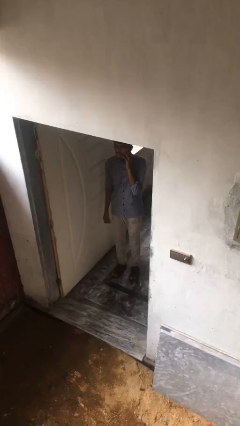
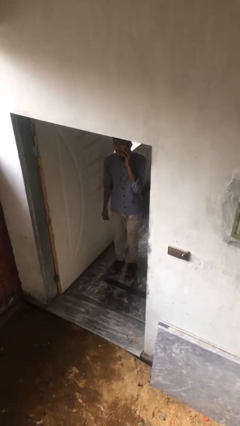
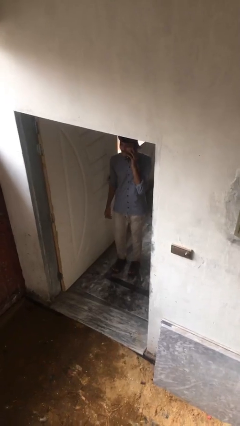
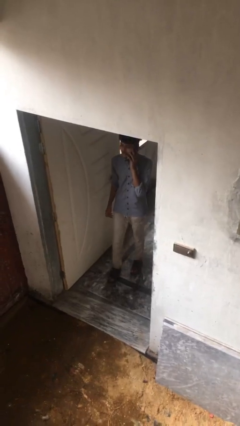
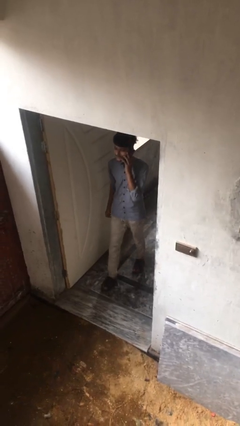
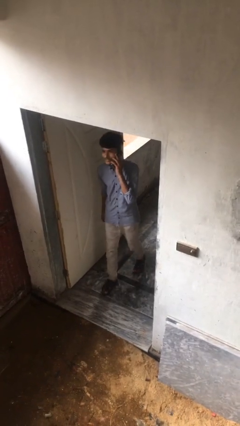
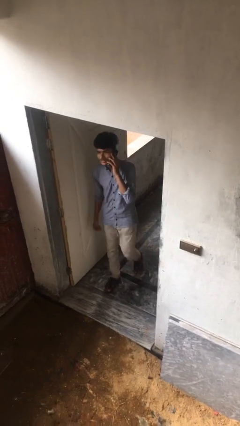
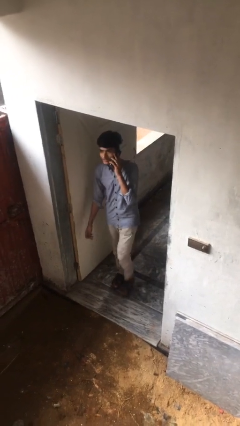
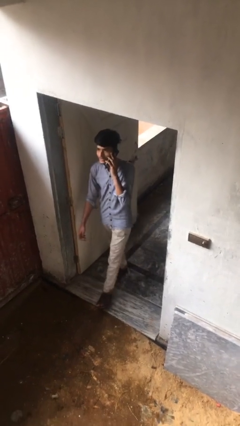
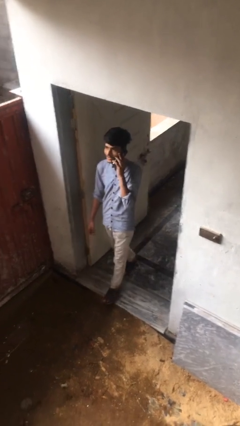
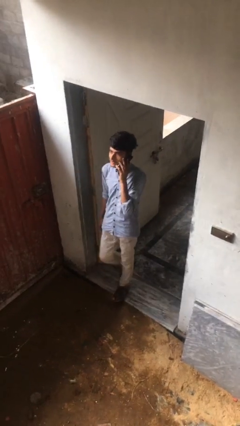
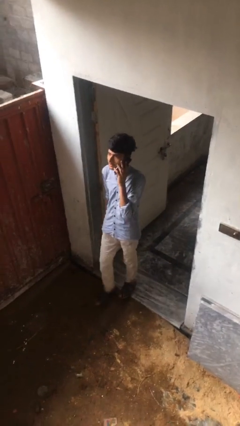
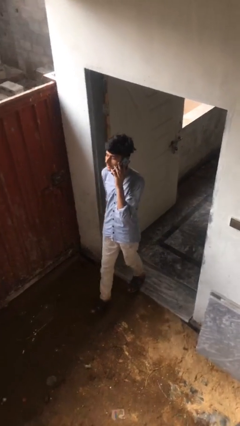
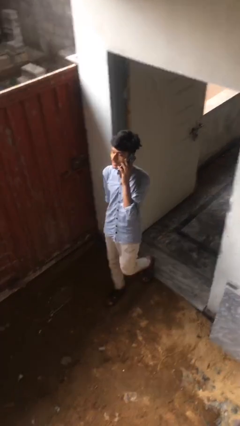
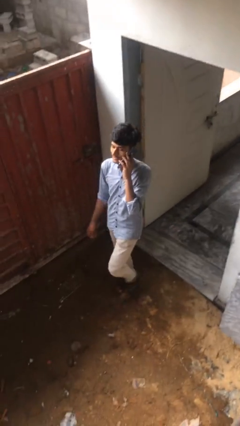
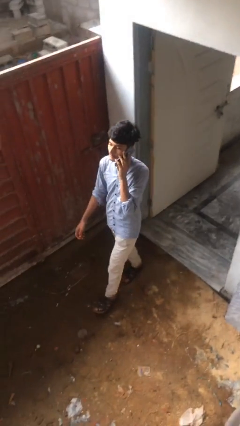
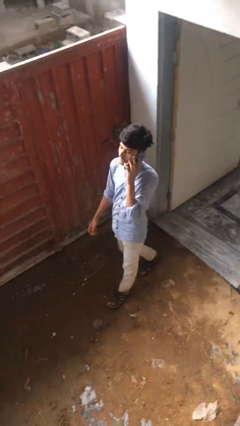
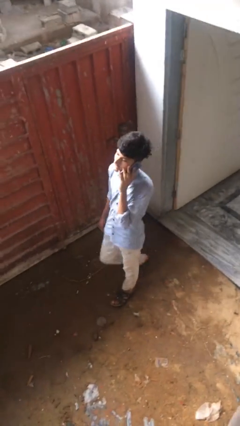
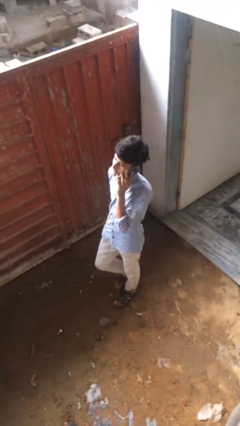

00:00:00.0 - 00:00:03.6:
person enters scene through structure

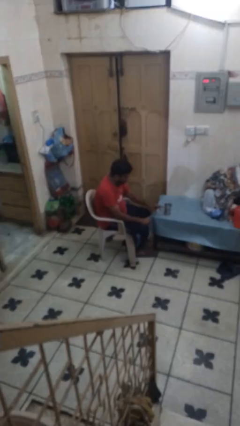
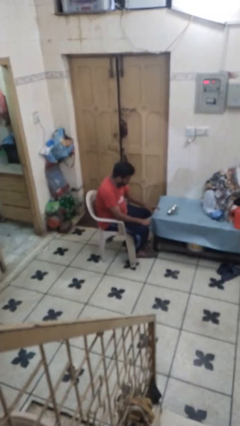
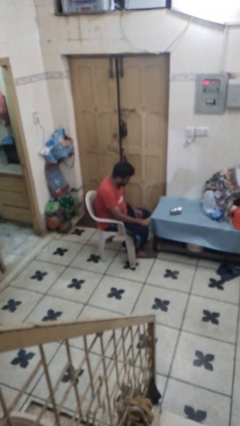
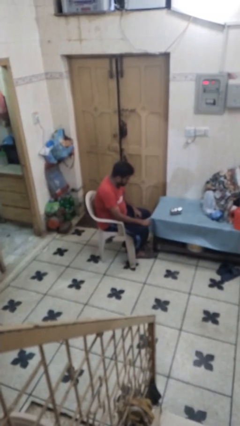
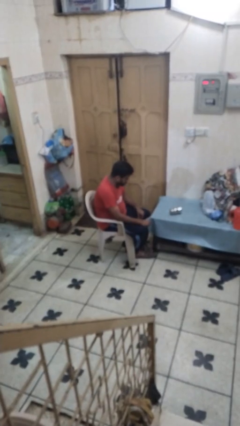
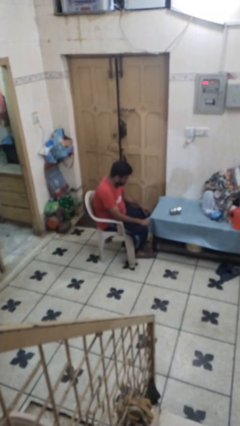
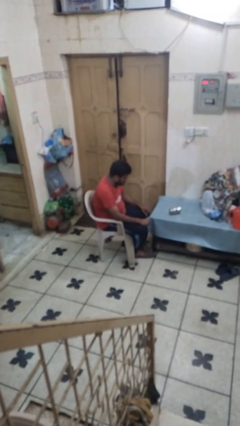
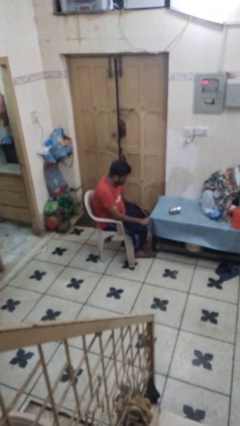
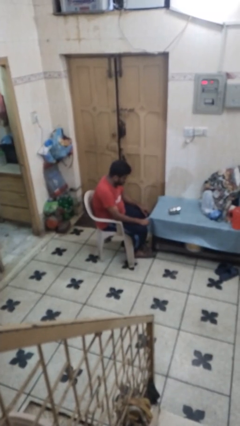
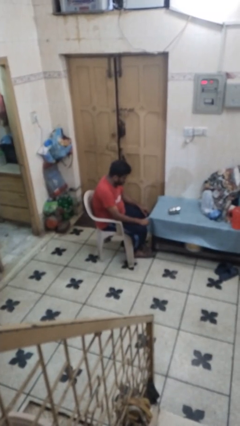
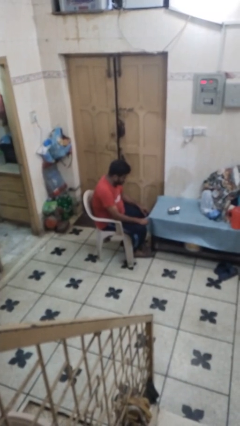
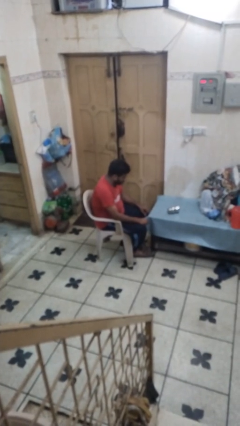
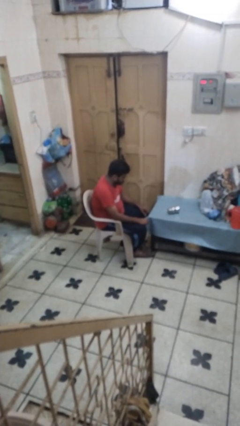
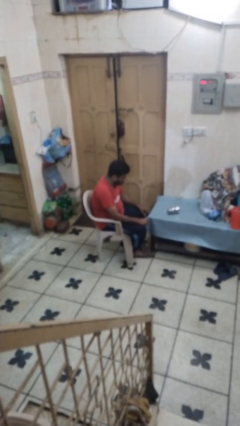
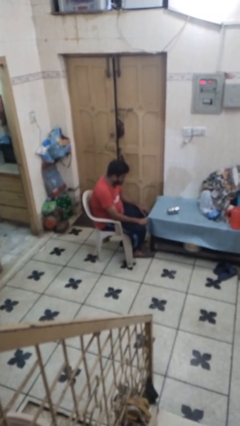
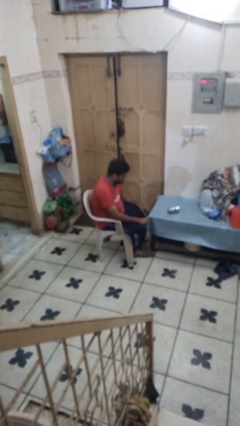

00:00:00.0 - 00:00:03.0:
person knocks over glass

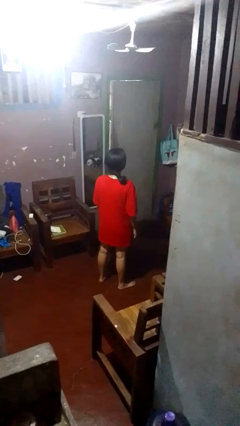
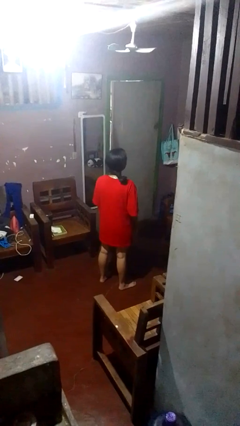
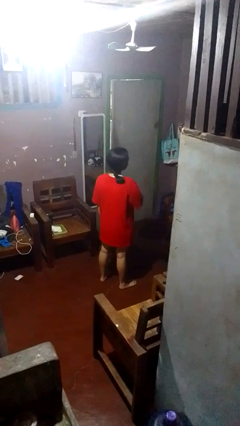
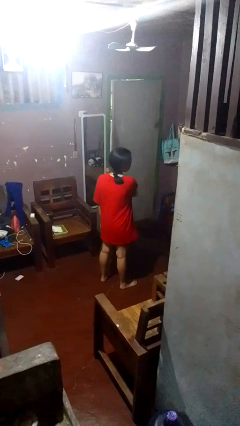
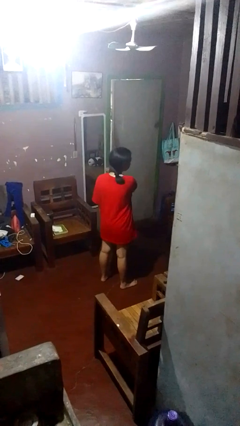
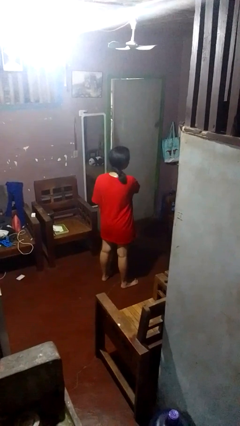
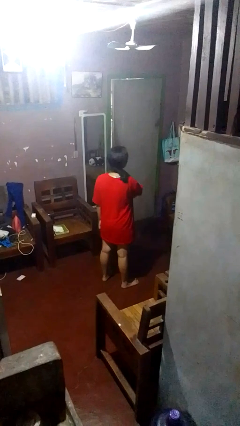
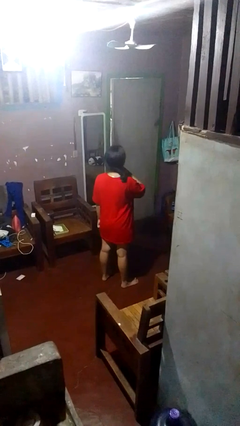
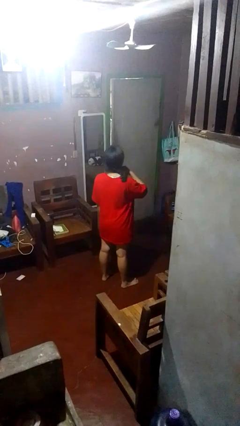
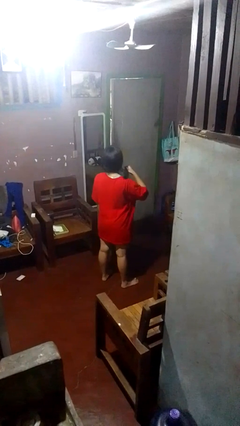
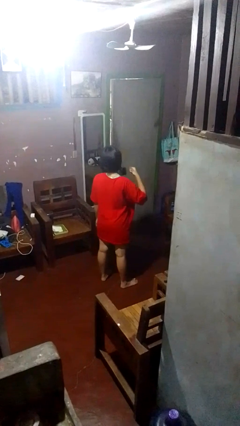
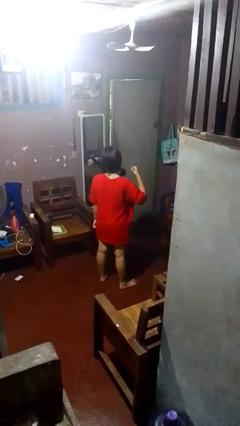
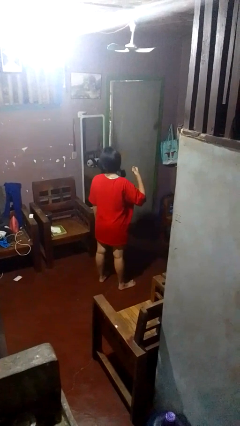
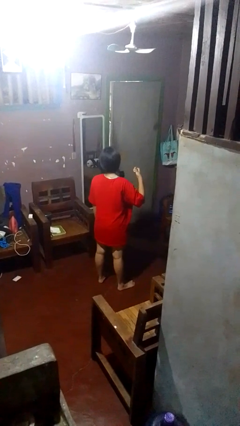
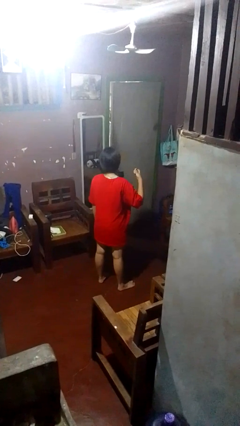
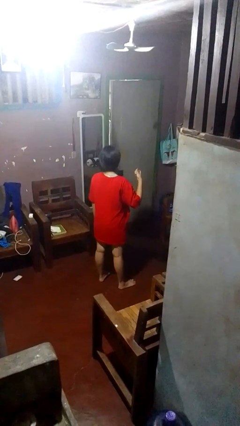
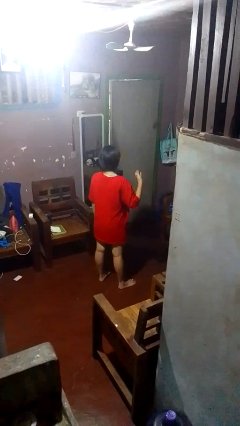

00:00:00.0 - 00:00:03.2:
person gestures cut

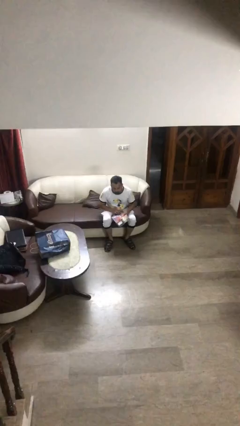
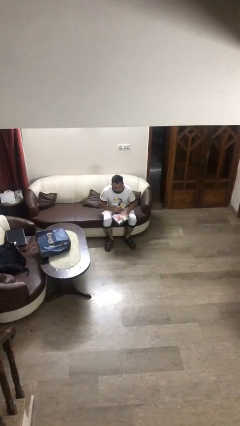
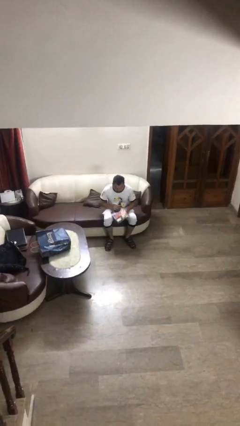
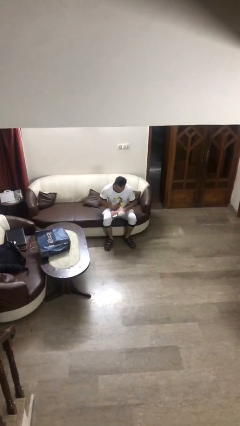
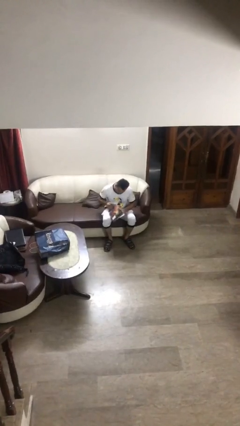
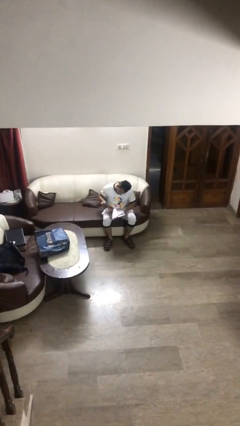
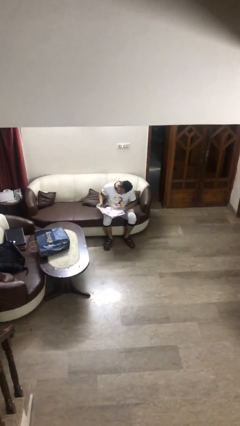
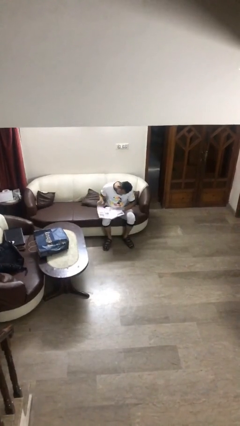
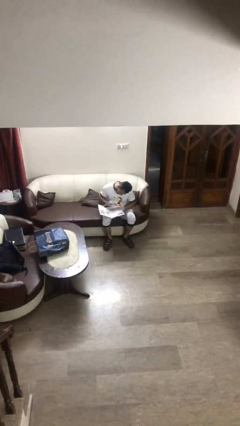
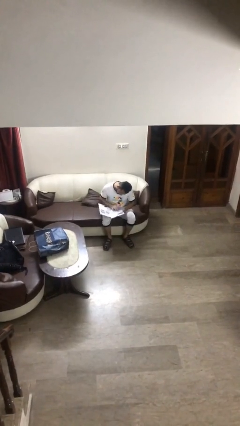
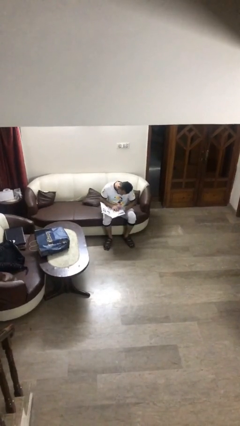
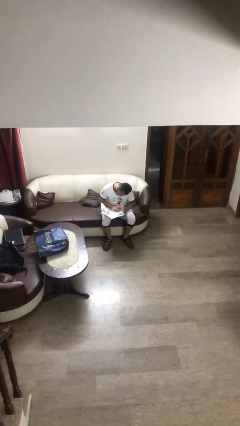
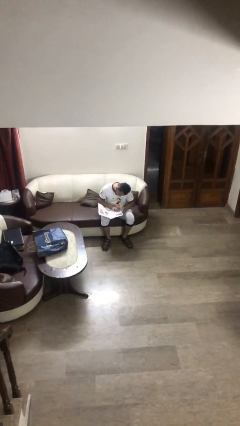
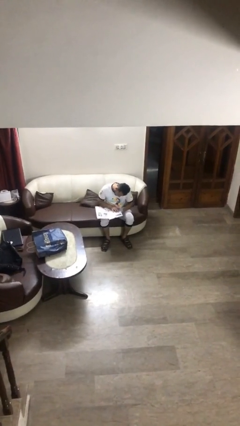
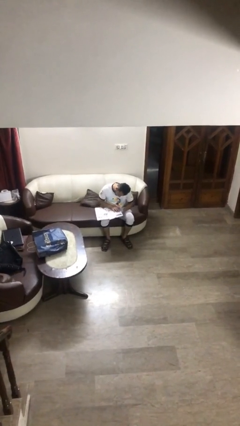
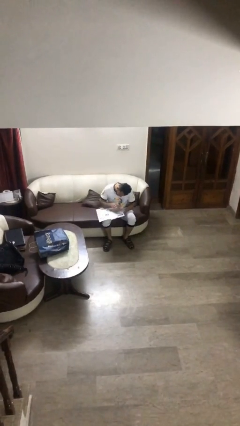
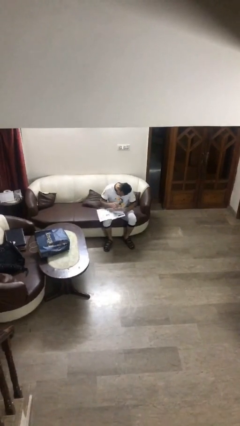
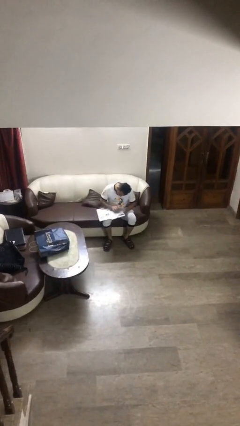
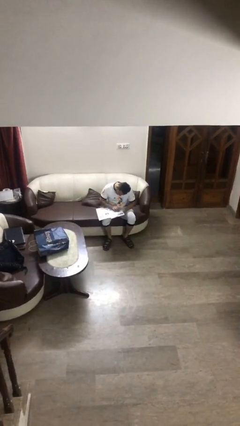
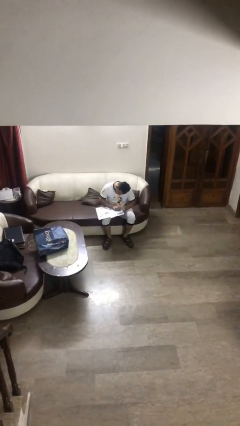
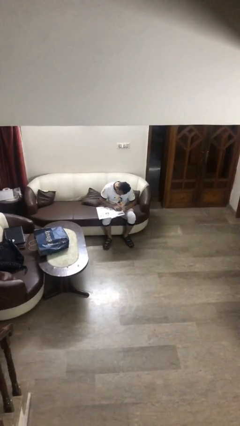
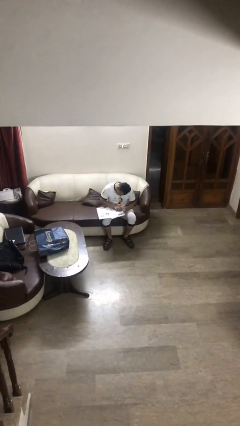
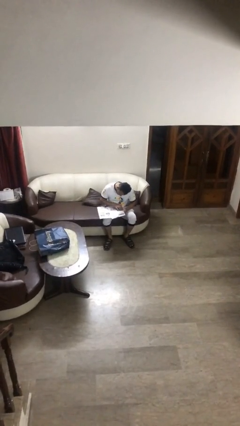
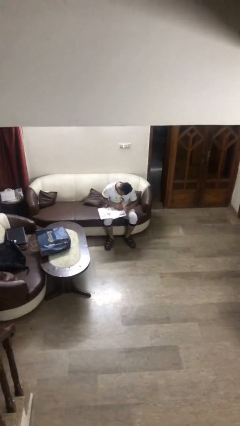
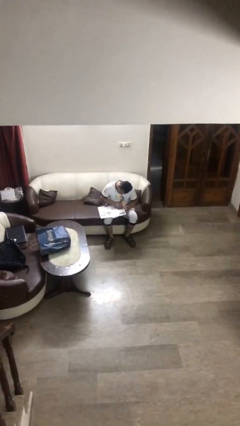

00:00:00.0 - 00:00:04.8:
person reads document

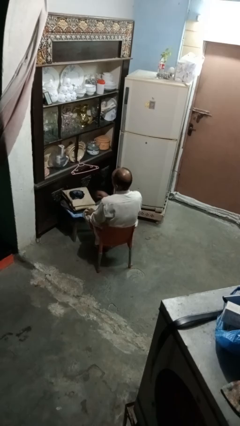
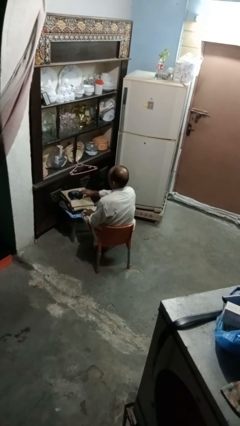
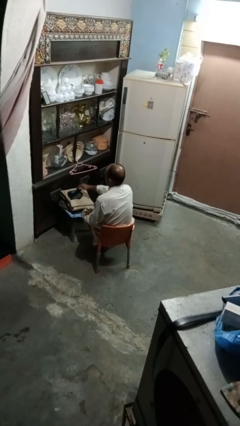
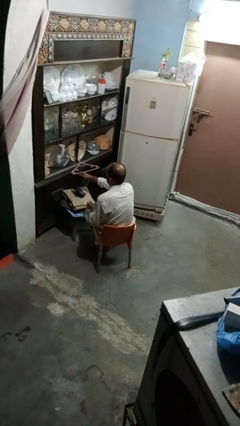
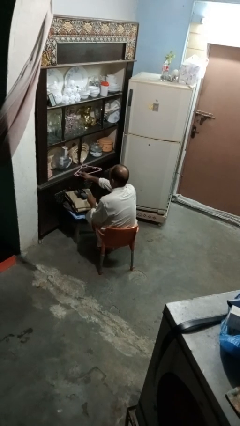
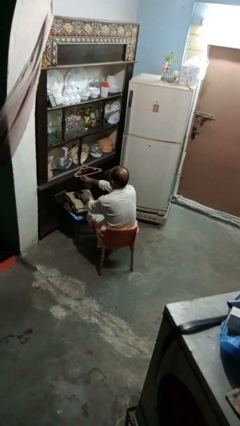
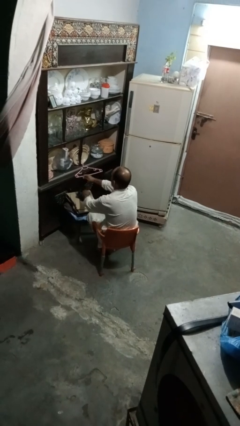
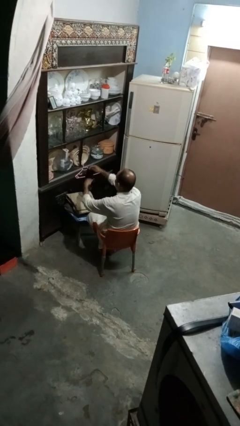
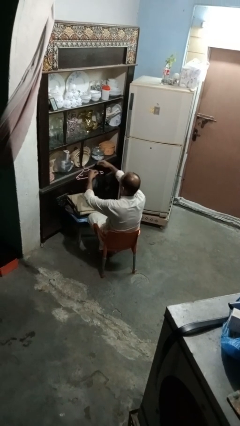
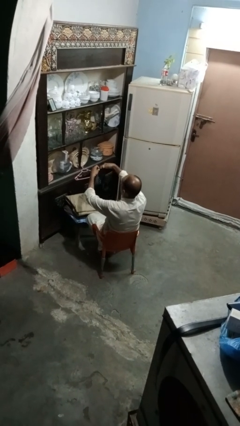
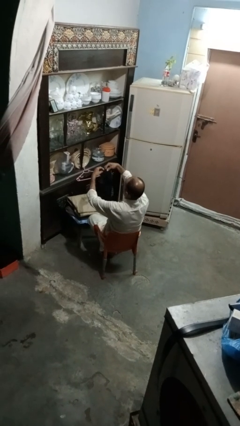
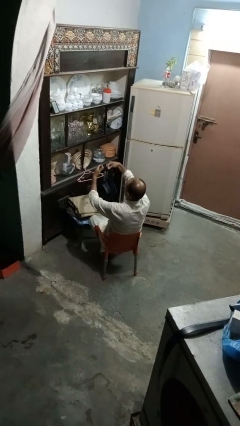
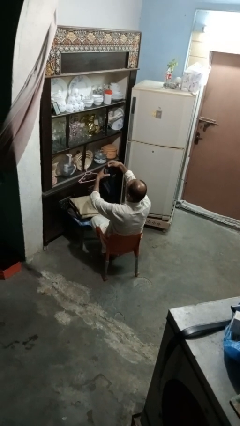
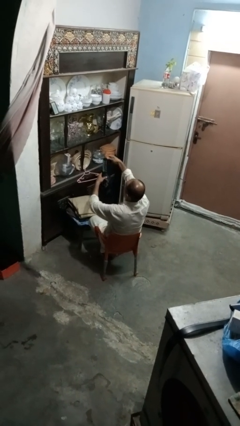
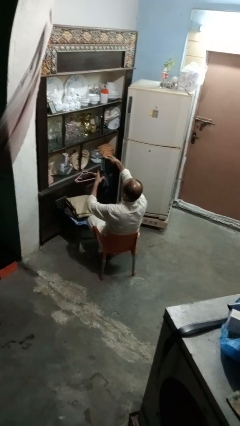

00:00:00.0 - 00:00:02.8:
person folds socks
